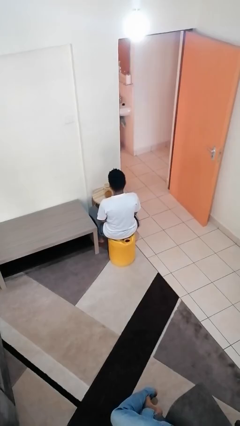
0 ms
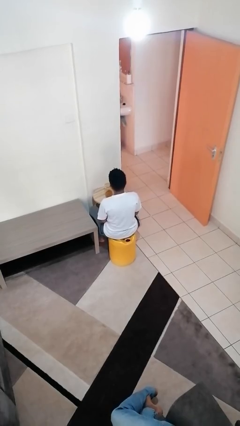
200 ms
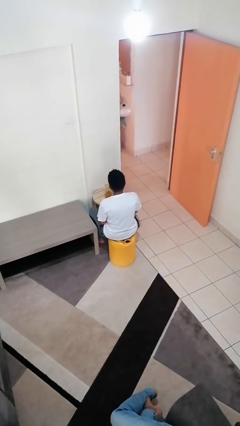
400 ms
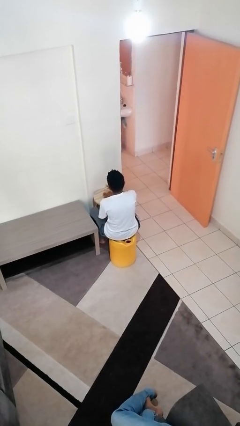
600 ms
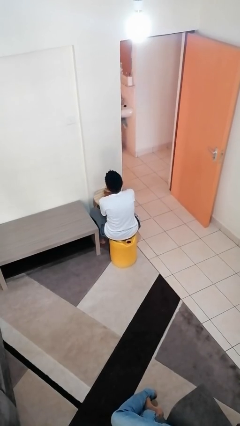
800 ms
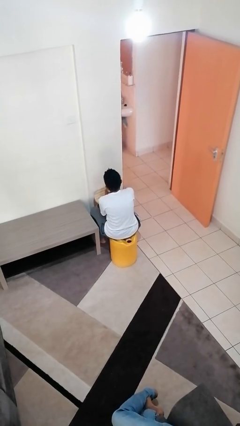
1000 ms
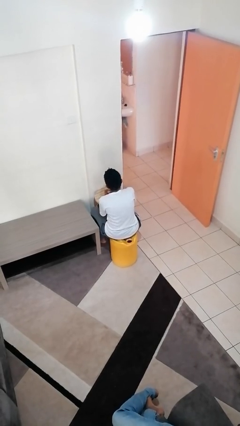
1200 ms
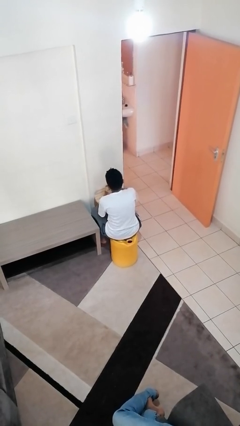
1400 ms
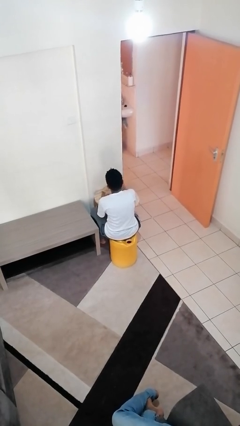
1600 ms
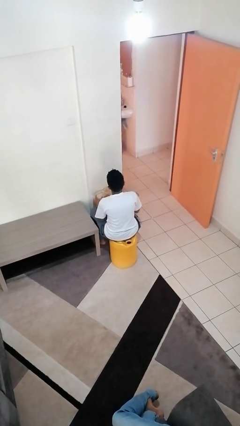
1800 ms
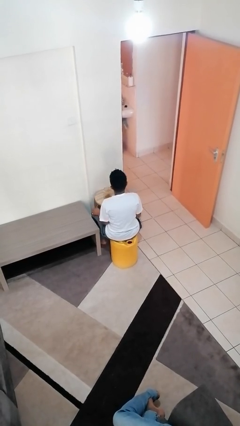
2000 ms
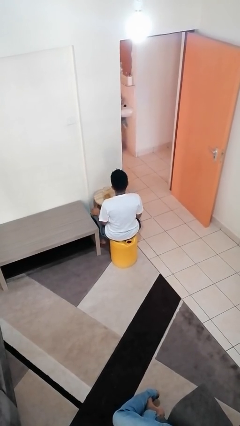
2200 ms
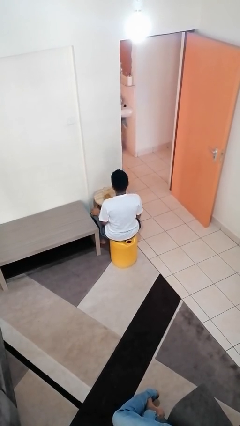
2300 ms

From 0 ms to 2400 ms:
person opens jar

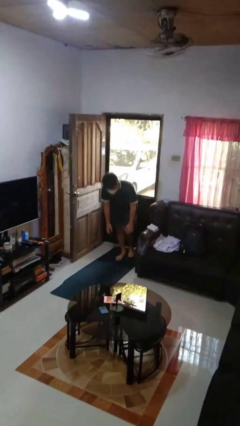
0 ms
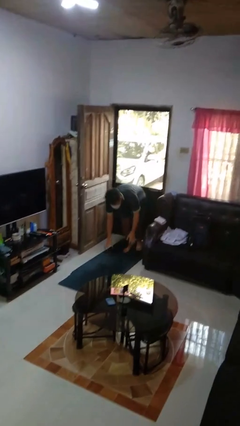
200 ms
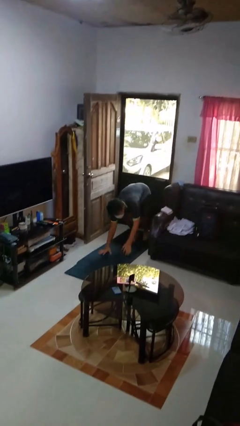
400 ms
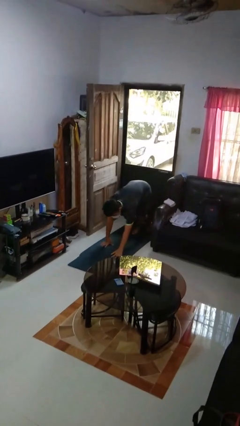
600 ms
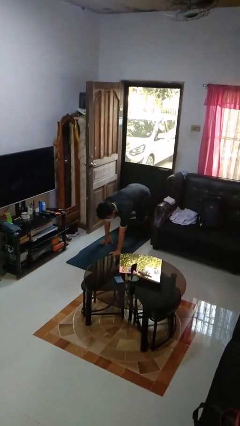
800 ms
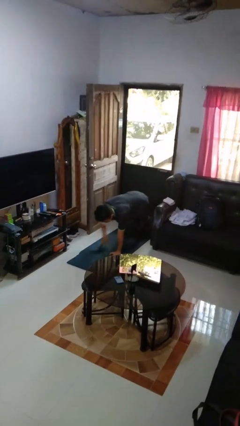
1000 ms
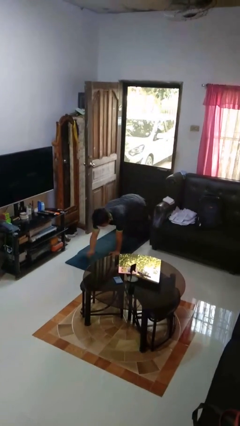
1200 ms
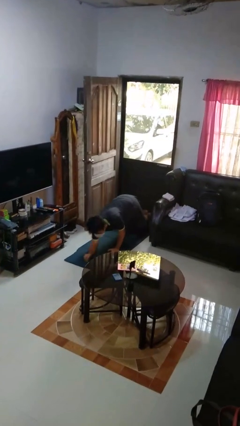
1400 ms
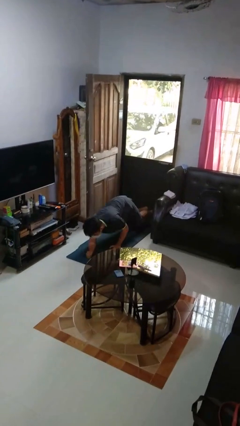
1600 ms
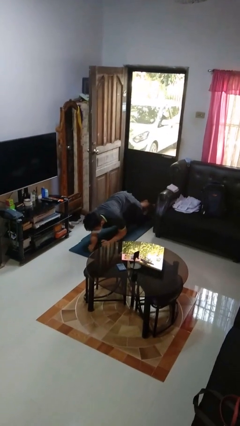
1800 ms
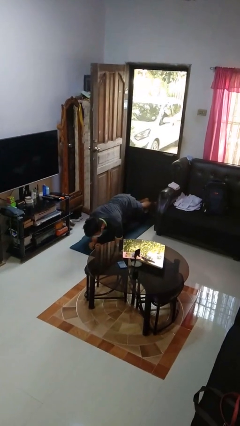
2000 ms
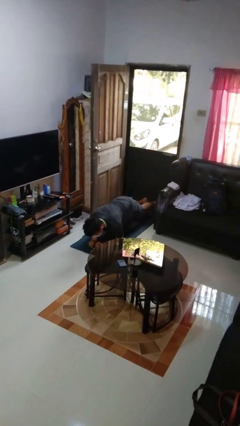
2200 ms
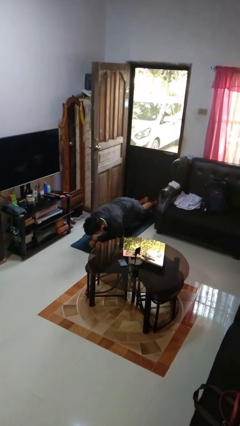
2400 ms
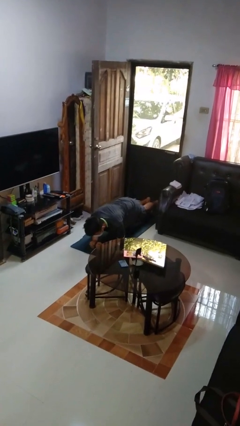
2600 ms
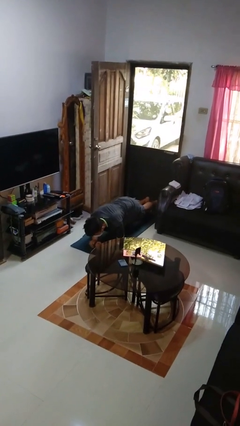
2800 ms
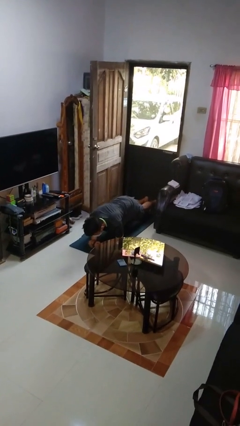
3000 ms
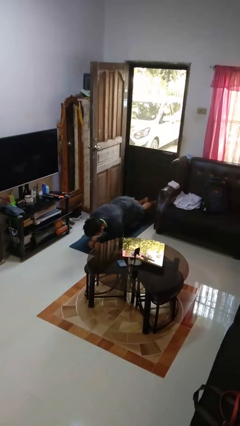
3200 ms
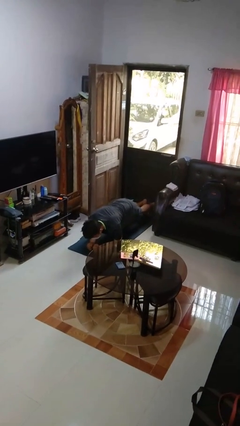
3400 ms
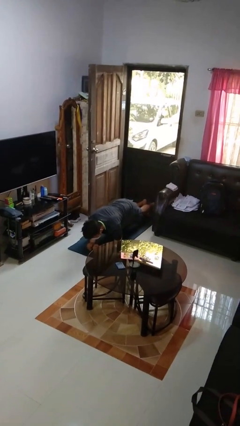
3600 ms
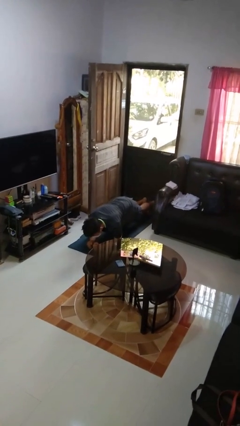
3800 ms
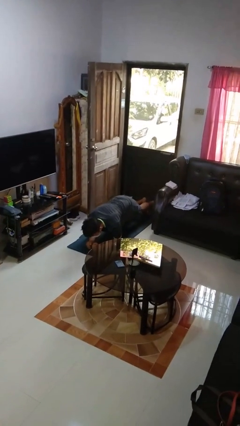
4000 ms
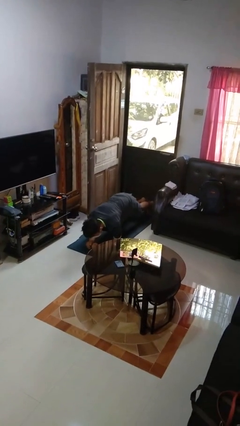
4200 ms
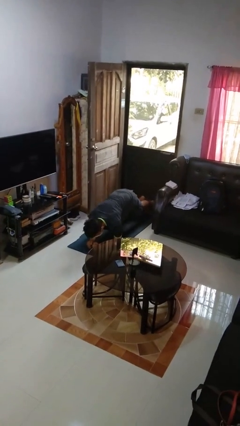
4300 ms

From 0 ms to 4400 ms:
person exercises with plank

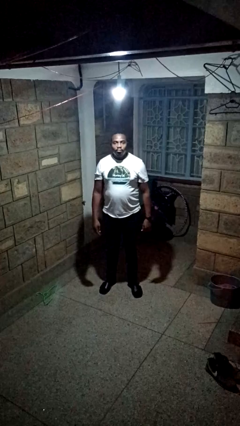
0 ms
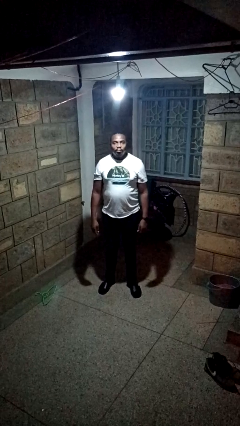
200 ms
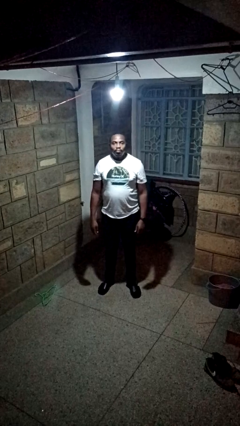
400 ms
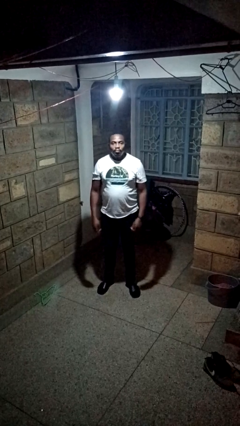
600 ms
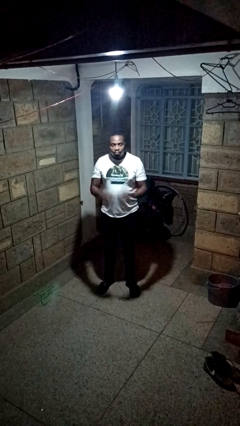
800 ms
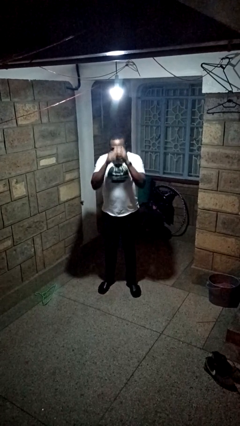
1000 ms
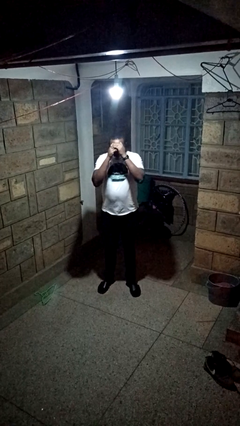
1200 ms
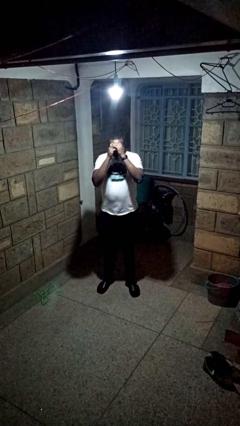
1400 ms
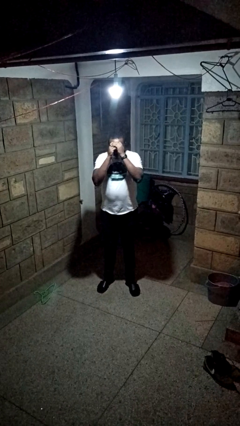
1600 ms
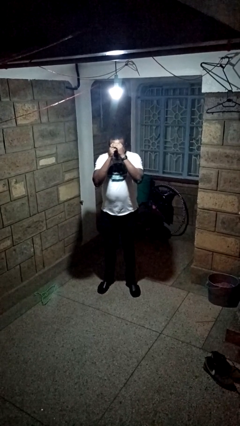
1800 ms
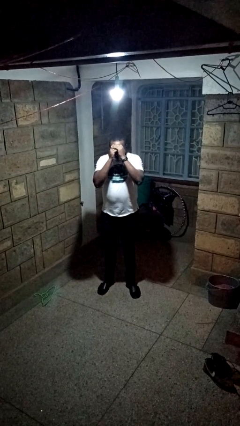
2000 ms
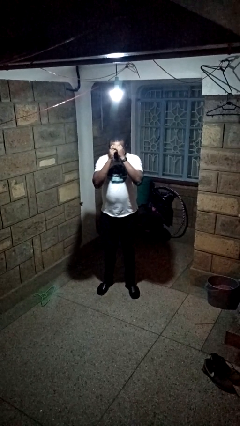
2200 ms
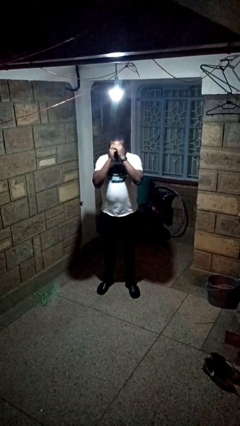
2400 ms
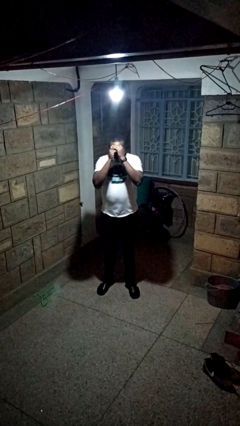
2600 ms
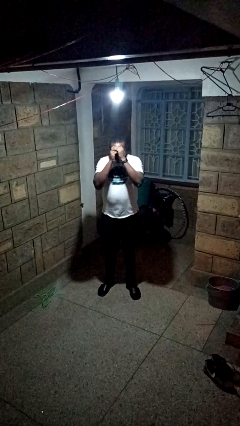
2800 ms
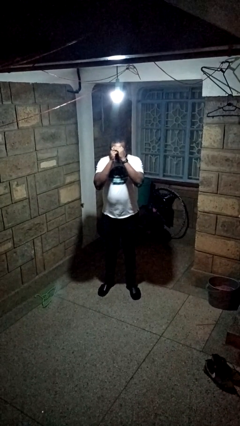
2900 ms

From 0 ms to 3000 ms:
person shades eyes

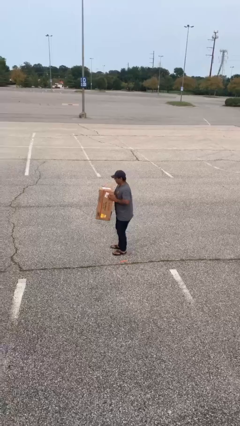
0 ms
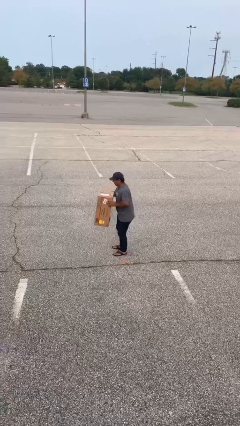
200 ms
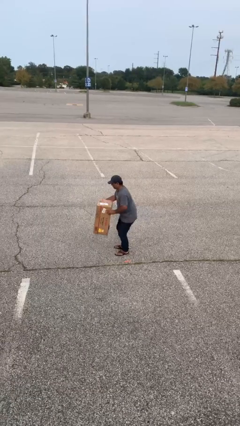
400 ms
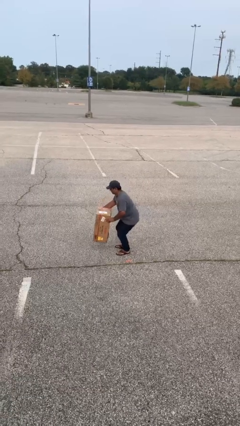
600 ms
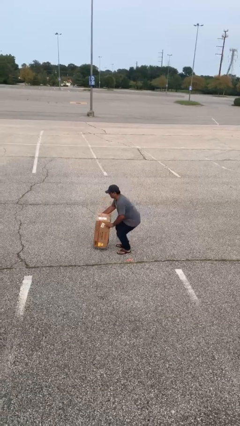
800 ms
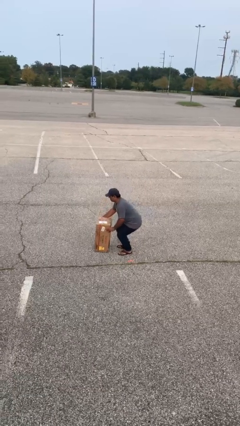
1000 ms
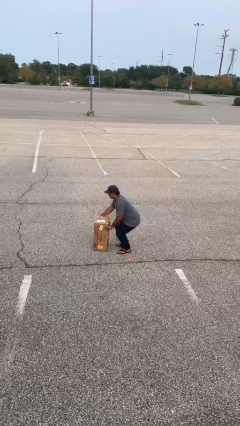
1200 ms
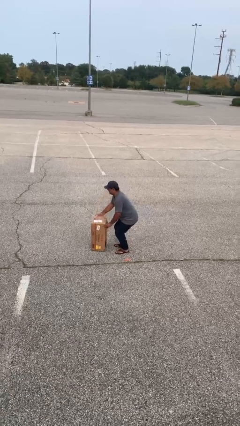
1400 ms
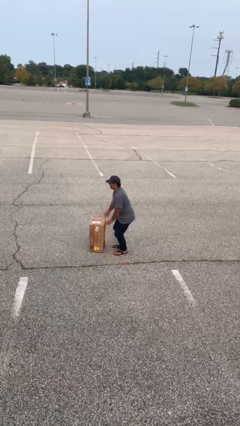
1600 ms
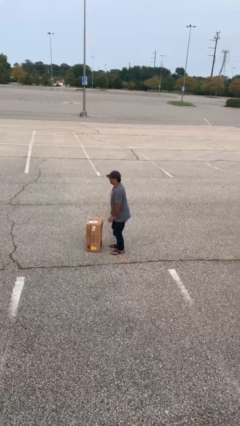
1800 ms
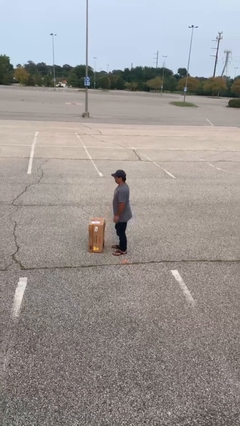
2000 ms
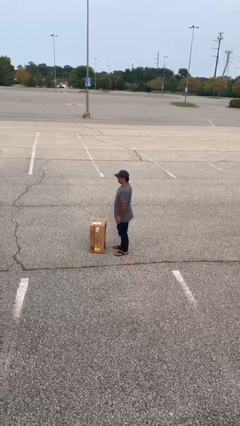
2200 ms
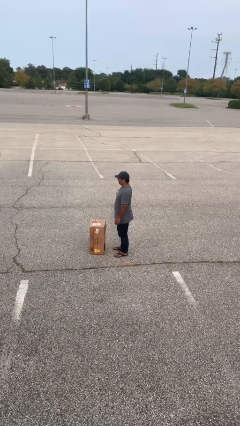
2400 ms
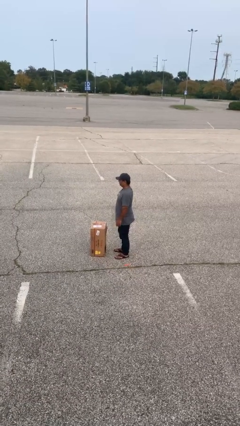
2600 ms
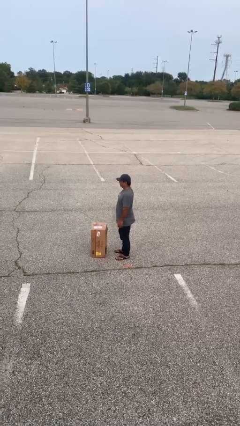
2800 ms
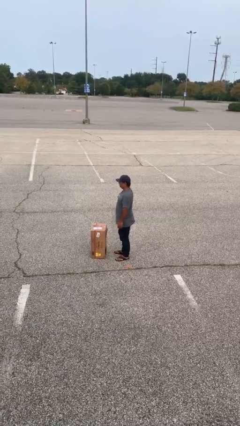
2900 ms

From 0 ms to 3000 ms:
person puts down object on floor

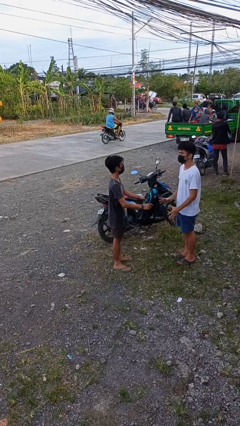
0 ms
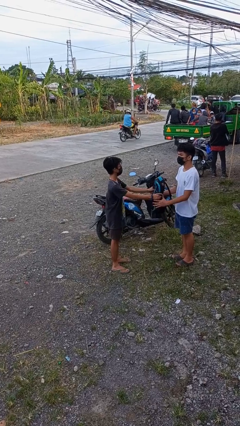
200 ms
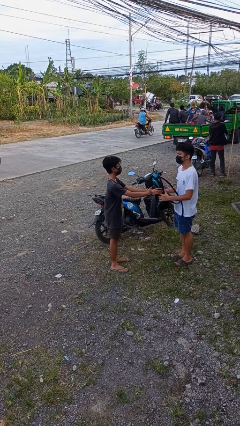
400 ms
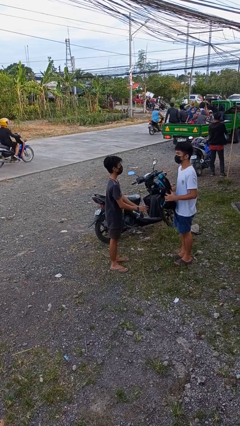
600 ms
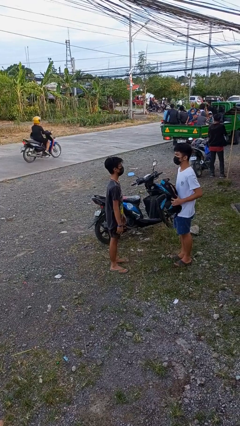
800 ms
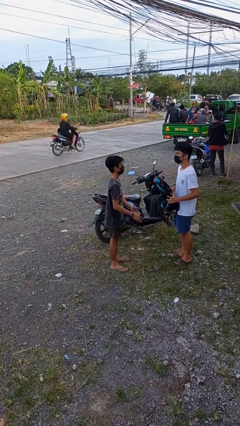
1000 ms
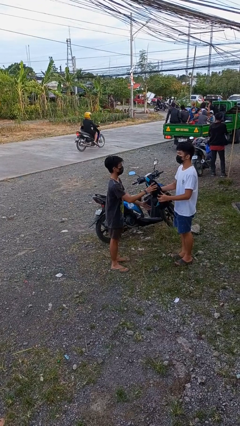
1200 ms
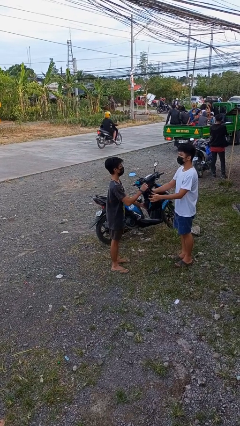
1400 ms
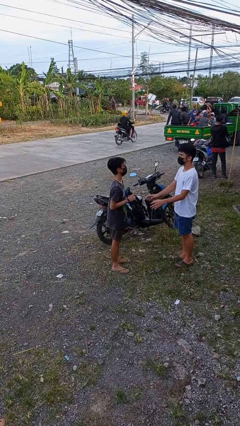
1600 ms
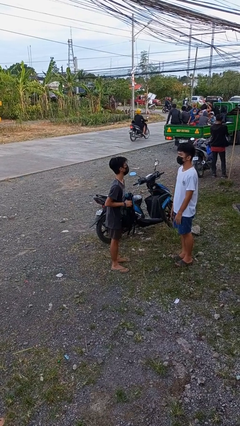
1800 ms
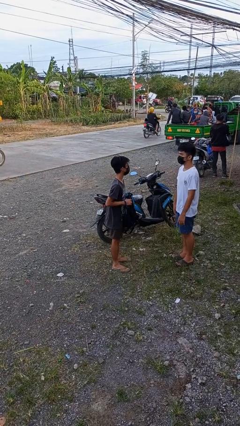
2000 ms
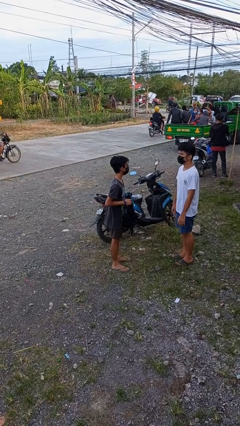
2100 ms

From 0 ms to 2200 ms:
person transfers object to person

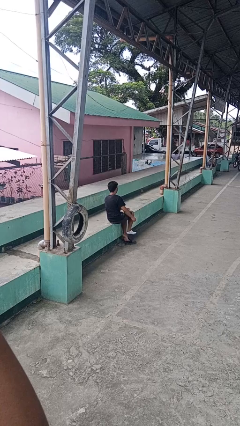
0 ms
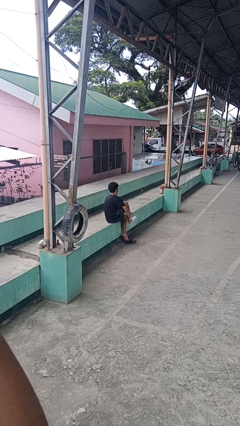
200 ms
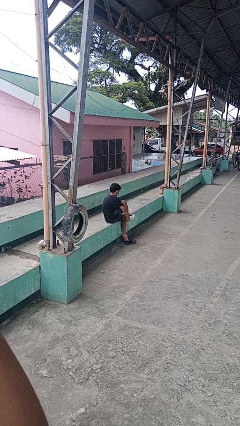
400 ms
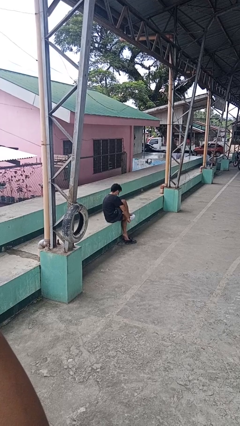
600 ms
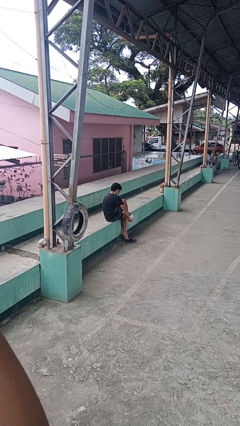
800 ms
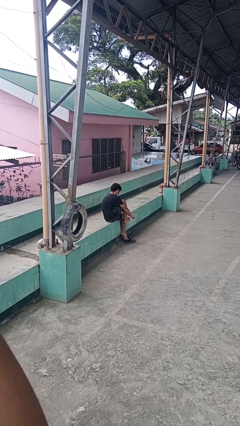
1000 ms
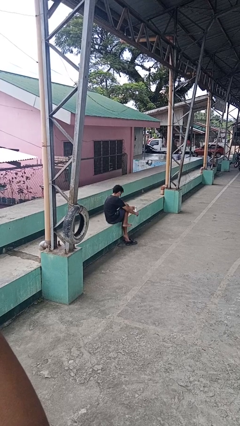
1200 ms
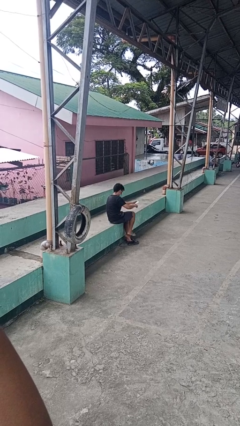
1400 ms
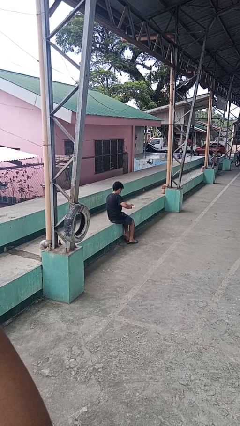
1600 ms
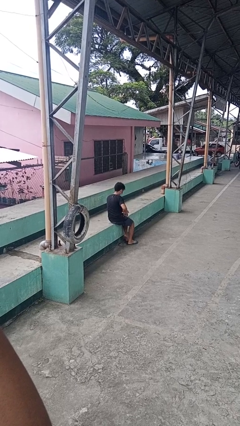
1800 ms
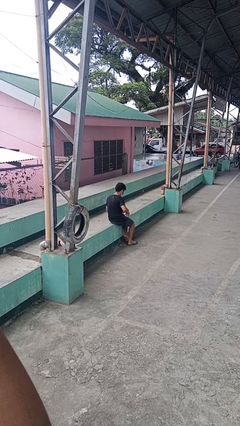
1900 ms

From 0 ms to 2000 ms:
person takes off socks
